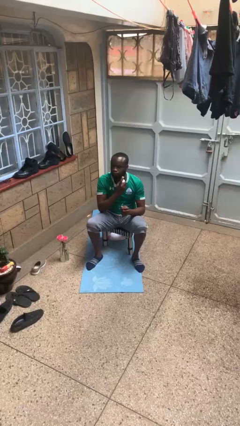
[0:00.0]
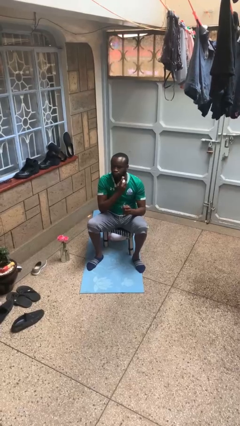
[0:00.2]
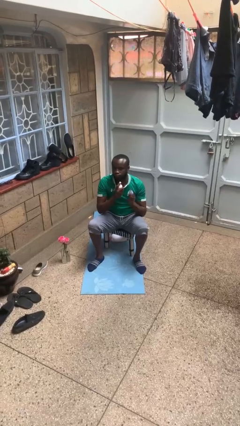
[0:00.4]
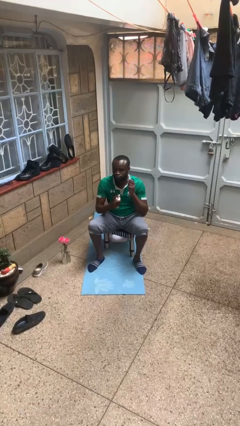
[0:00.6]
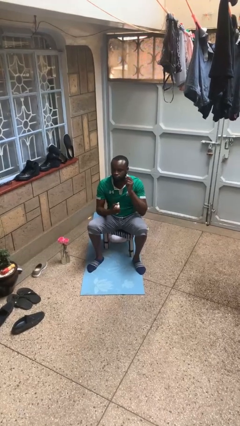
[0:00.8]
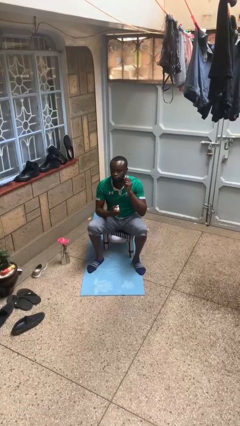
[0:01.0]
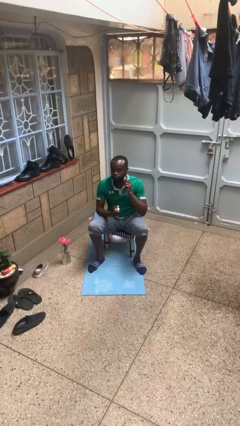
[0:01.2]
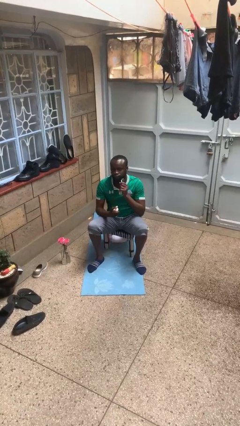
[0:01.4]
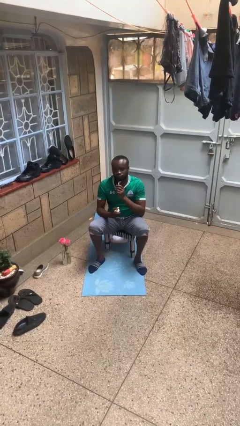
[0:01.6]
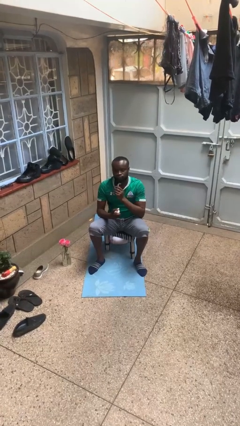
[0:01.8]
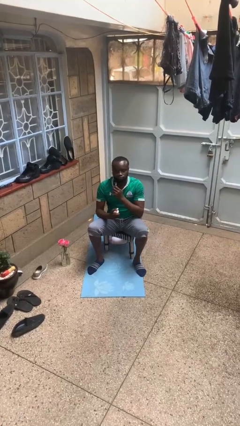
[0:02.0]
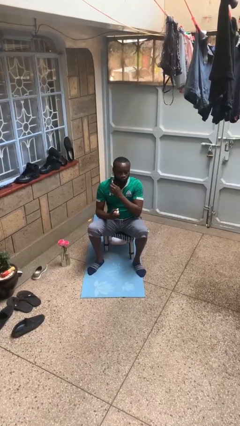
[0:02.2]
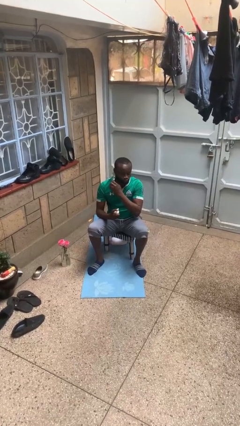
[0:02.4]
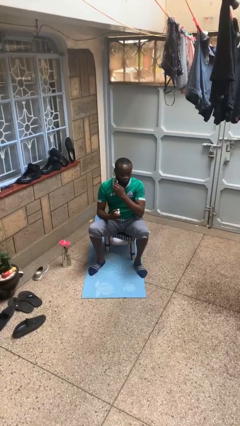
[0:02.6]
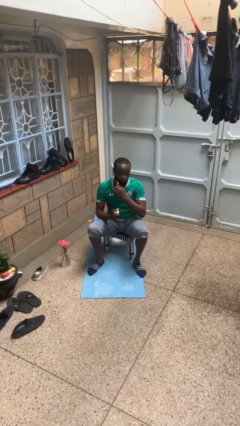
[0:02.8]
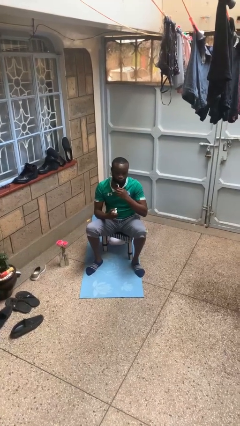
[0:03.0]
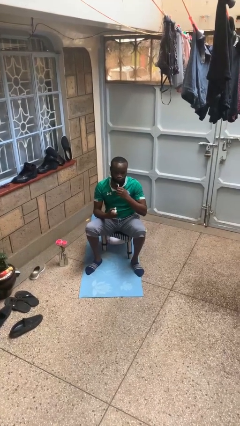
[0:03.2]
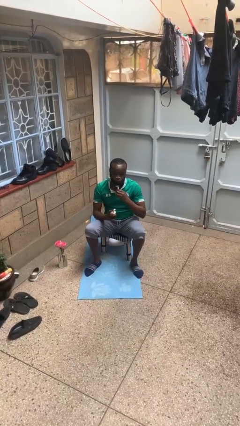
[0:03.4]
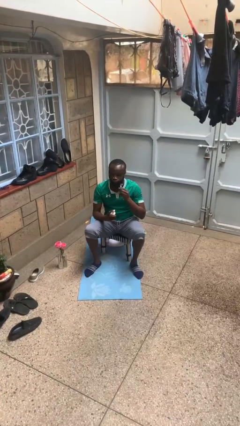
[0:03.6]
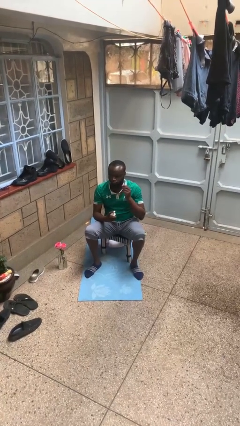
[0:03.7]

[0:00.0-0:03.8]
person shaves face

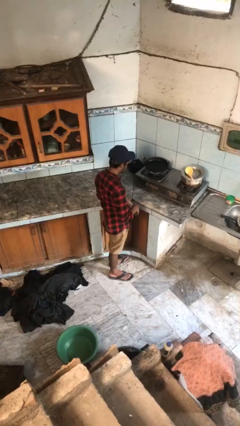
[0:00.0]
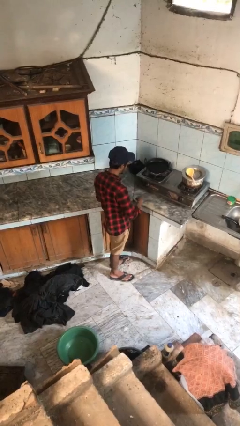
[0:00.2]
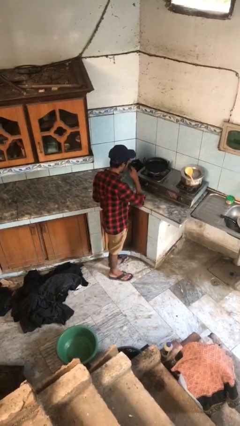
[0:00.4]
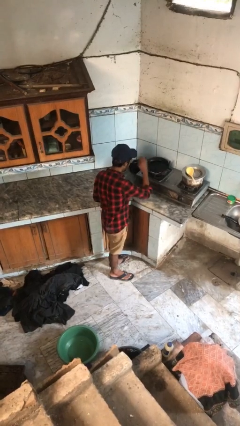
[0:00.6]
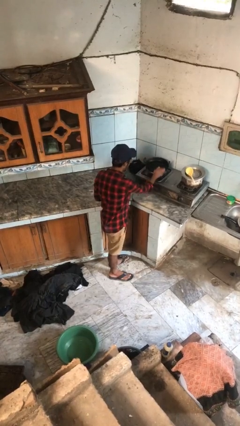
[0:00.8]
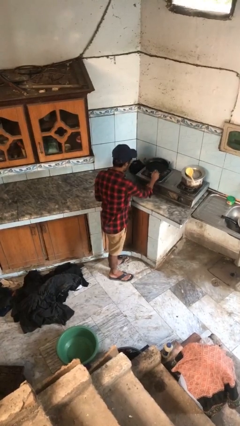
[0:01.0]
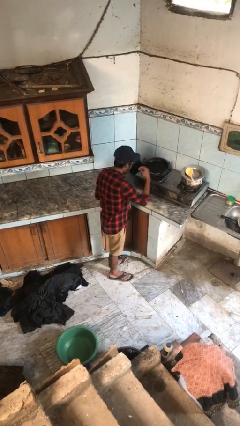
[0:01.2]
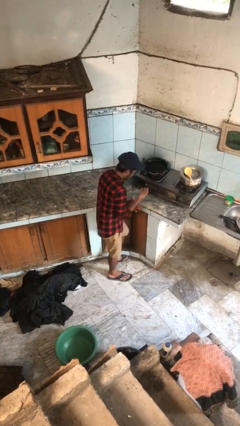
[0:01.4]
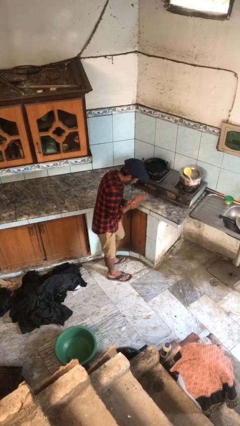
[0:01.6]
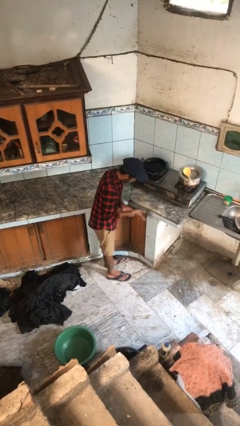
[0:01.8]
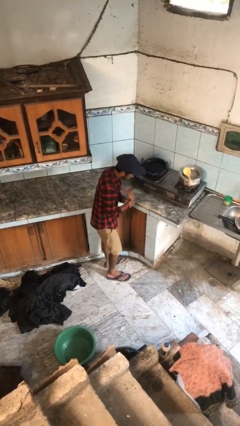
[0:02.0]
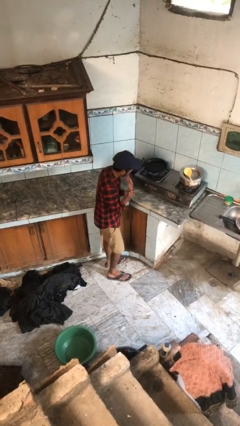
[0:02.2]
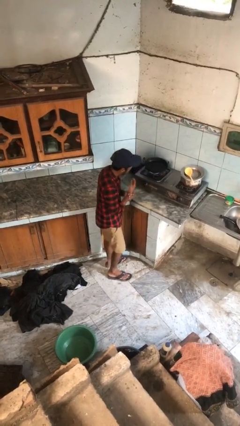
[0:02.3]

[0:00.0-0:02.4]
person burns hand

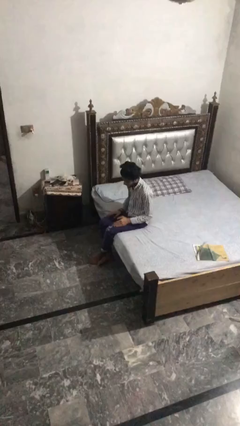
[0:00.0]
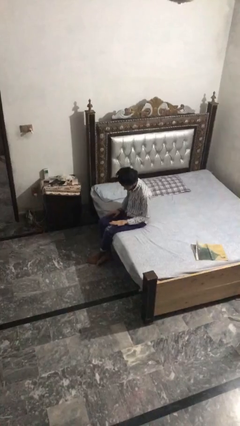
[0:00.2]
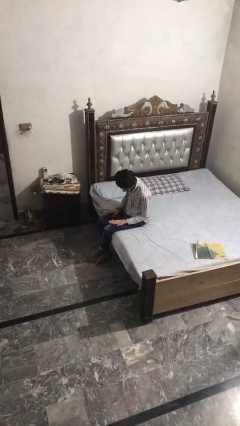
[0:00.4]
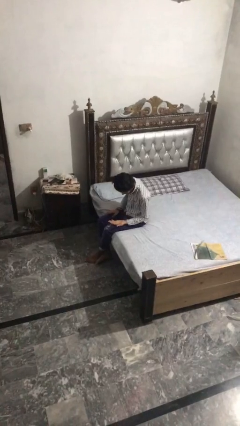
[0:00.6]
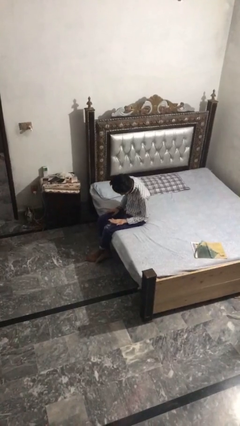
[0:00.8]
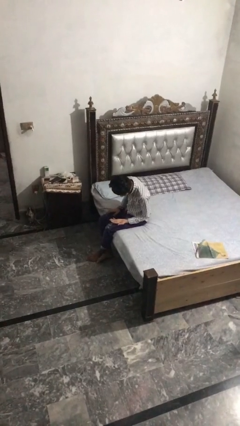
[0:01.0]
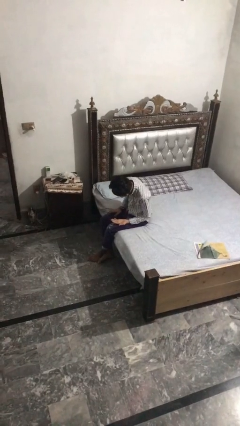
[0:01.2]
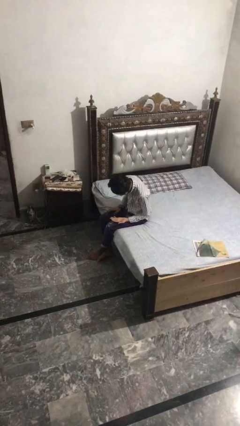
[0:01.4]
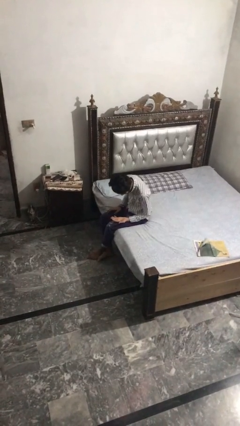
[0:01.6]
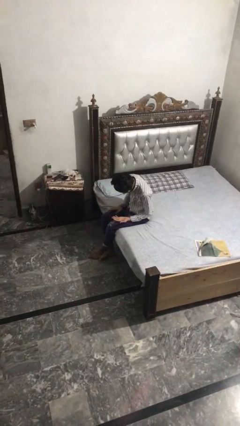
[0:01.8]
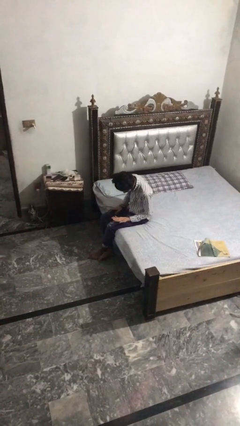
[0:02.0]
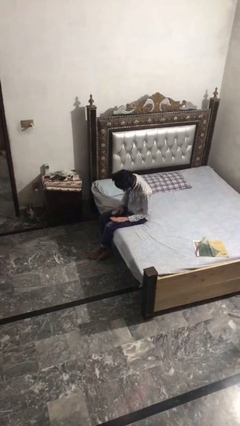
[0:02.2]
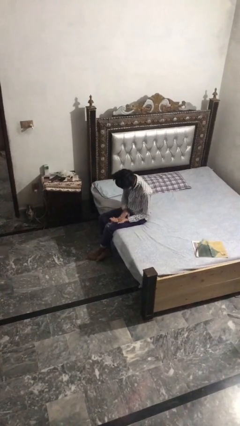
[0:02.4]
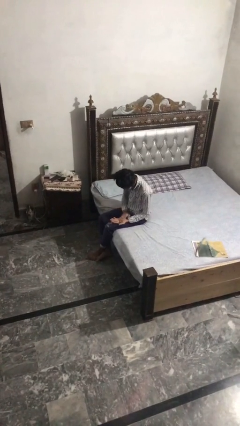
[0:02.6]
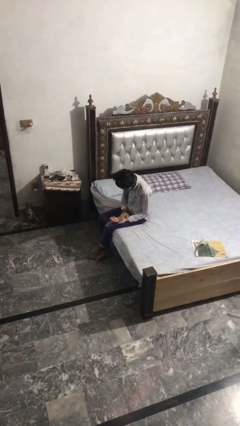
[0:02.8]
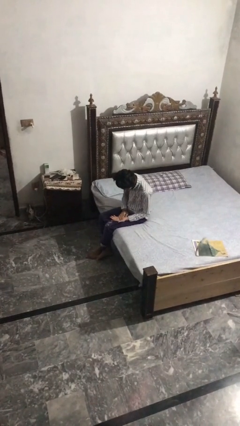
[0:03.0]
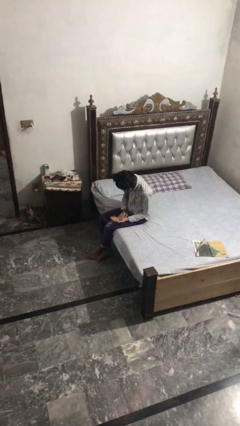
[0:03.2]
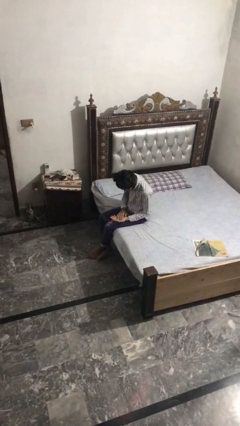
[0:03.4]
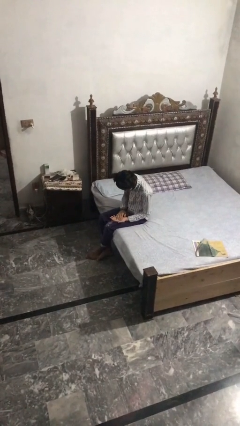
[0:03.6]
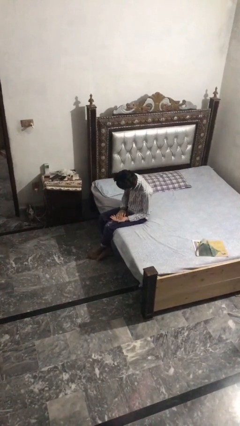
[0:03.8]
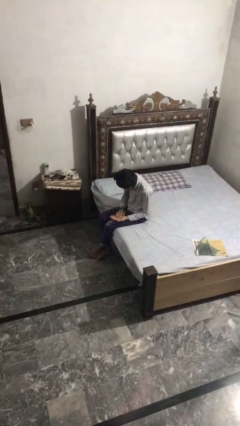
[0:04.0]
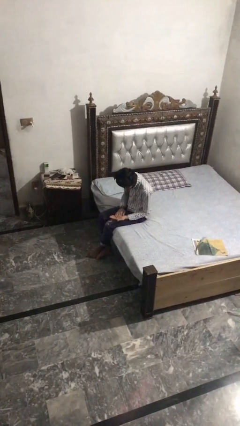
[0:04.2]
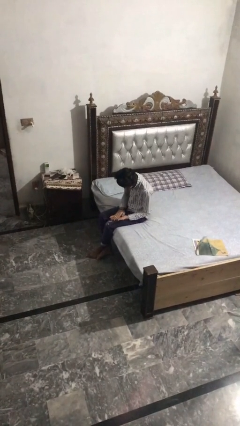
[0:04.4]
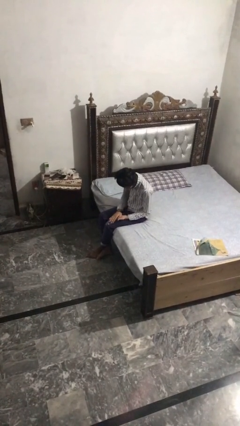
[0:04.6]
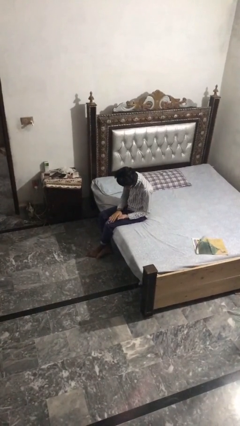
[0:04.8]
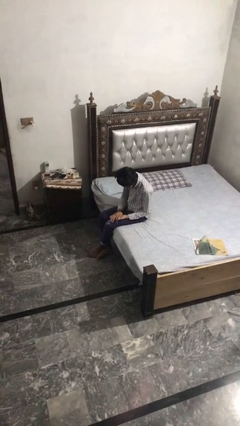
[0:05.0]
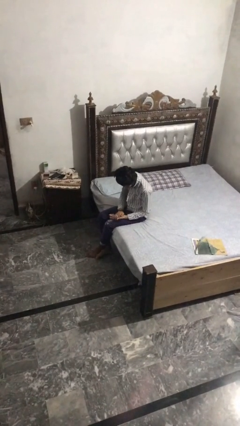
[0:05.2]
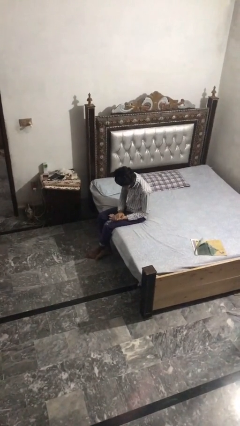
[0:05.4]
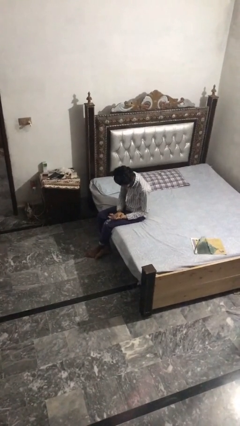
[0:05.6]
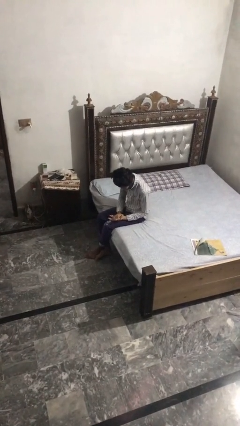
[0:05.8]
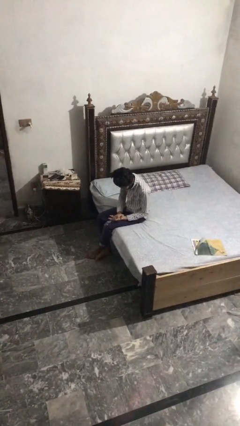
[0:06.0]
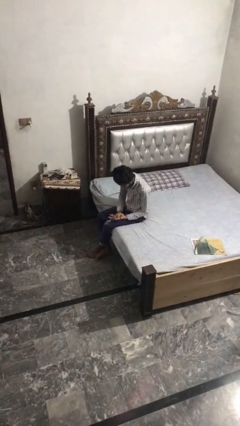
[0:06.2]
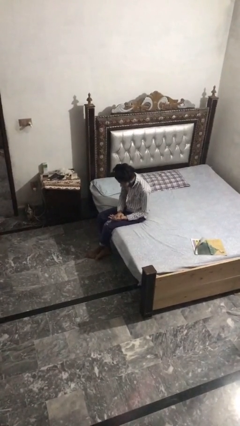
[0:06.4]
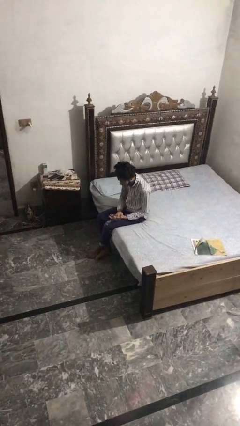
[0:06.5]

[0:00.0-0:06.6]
person looks at hands in lap

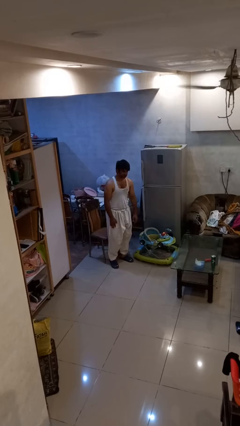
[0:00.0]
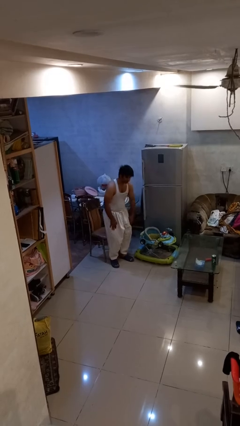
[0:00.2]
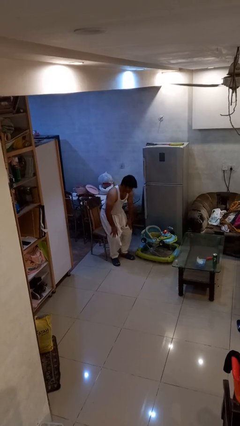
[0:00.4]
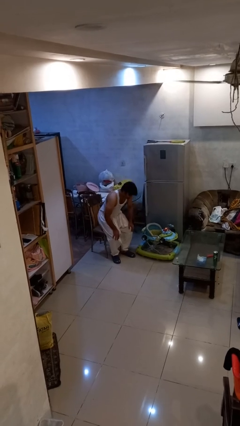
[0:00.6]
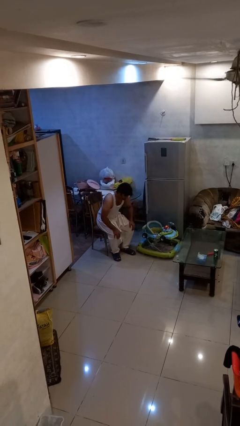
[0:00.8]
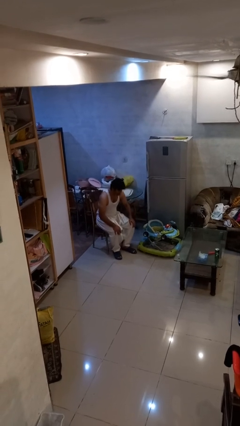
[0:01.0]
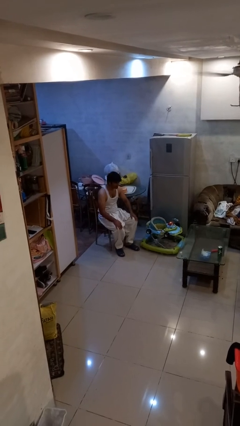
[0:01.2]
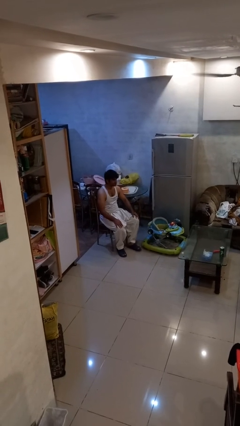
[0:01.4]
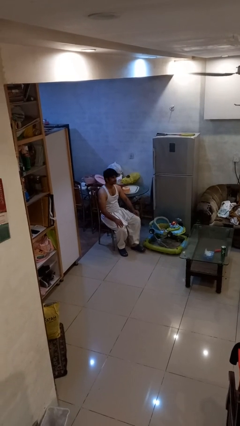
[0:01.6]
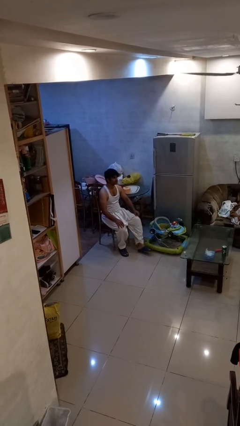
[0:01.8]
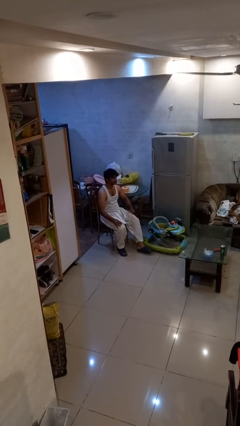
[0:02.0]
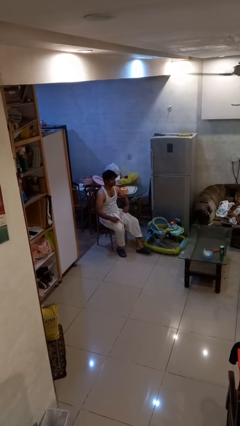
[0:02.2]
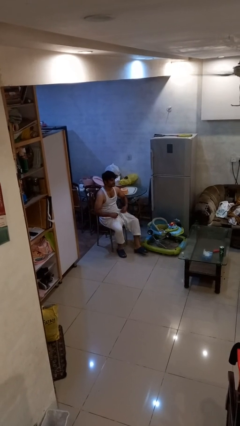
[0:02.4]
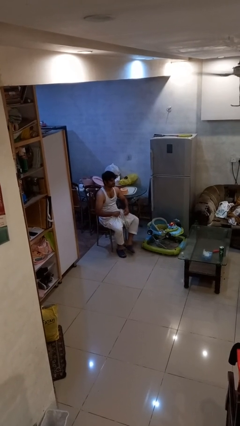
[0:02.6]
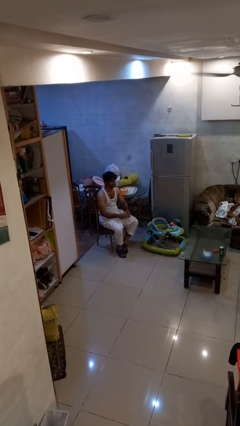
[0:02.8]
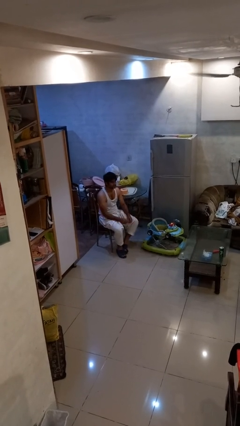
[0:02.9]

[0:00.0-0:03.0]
person sits down

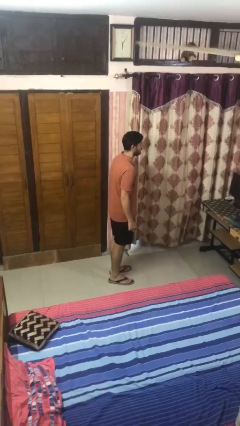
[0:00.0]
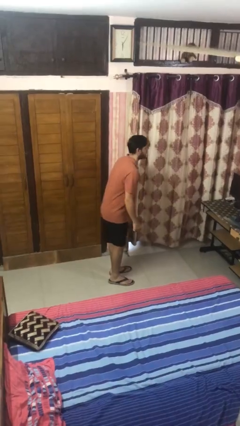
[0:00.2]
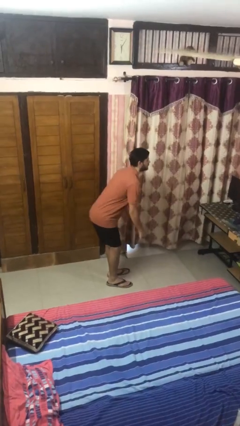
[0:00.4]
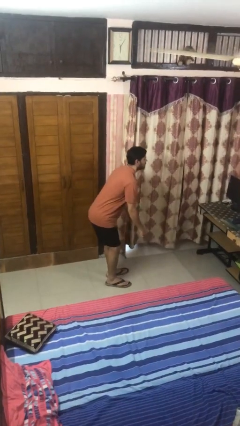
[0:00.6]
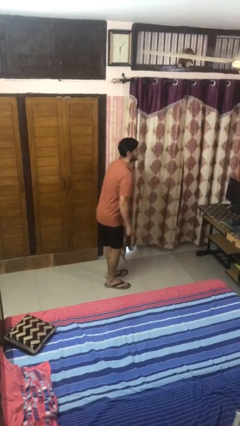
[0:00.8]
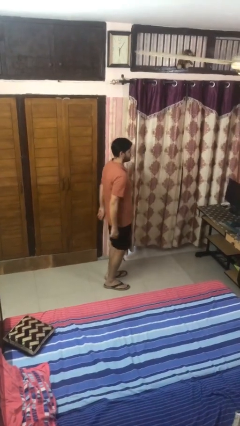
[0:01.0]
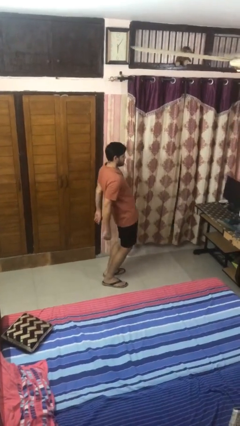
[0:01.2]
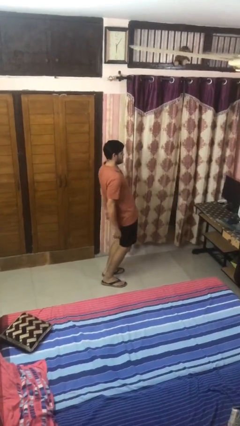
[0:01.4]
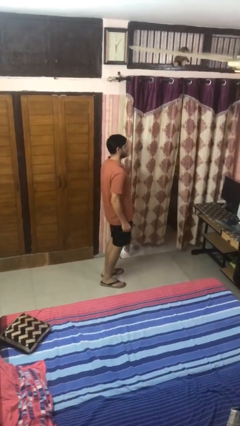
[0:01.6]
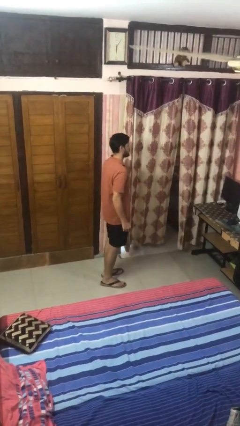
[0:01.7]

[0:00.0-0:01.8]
person wiggles hips
